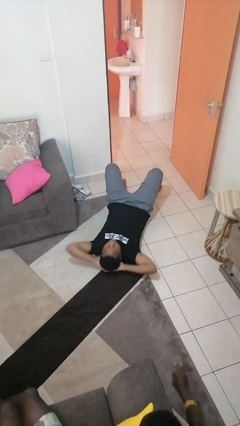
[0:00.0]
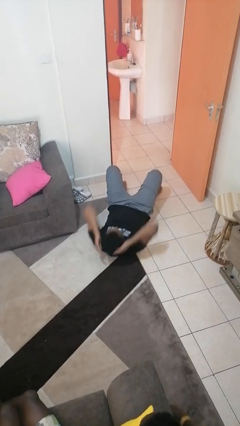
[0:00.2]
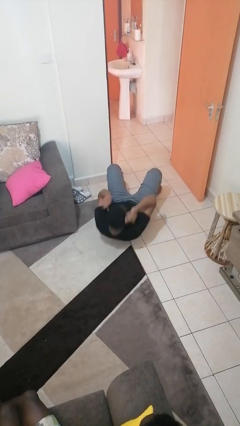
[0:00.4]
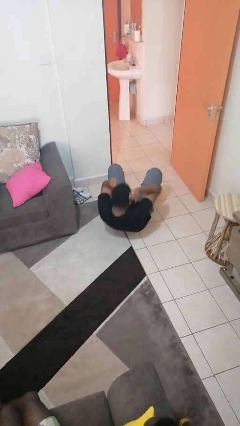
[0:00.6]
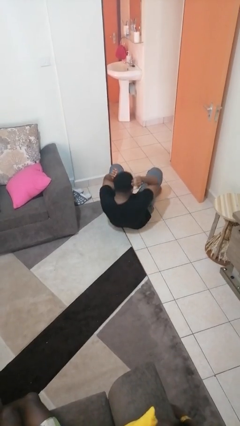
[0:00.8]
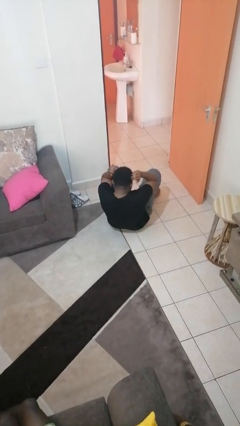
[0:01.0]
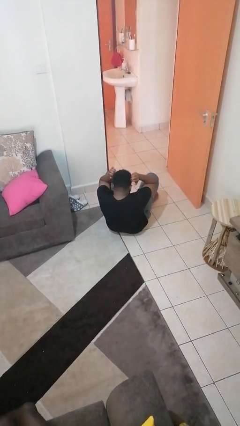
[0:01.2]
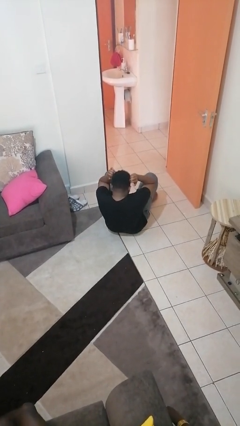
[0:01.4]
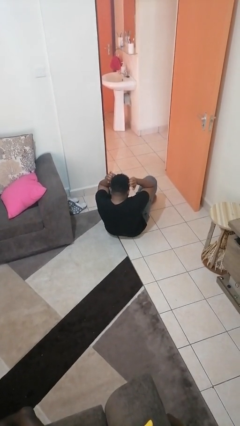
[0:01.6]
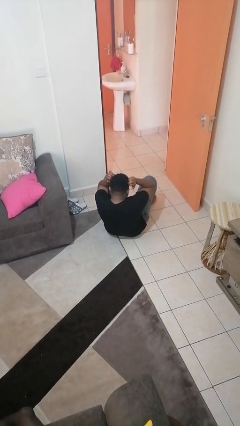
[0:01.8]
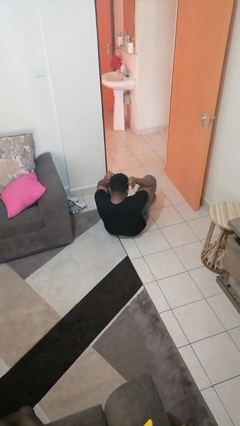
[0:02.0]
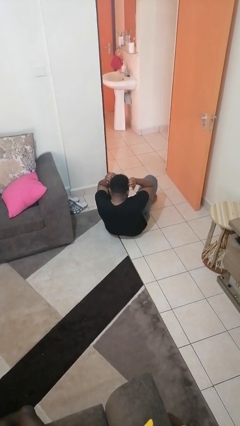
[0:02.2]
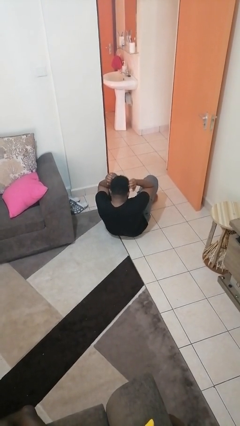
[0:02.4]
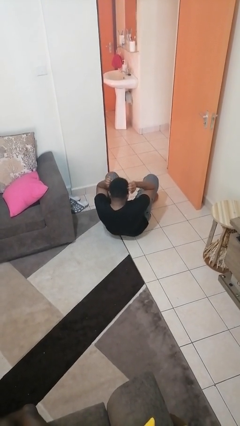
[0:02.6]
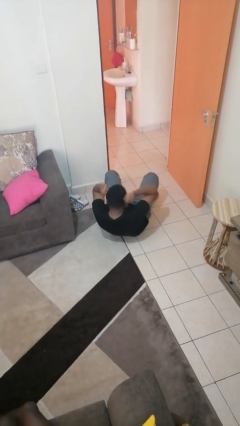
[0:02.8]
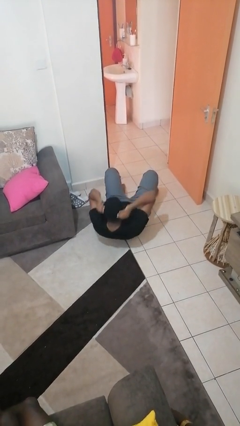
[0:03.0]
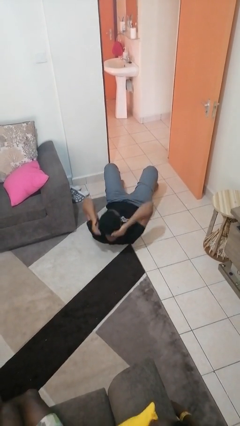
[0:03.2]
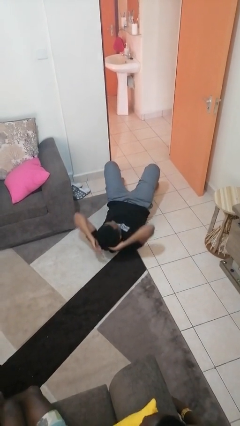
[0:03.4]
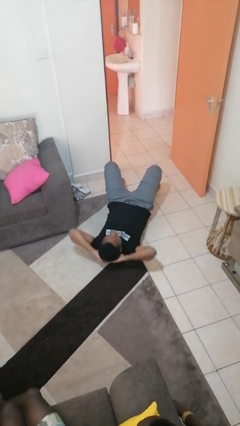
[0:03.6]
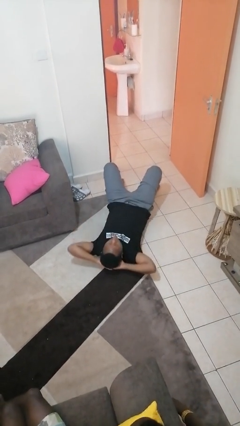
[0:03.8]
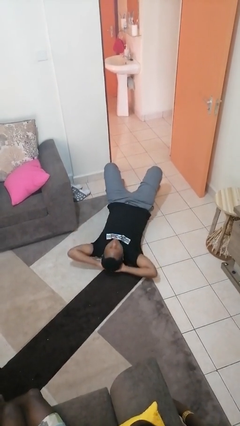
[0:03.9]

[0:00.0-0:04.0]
person exercises with situp

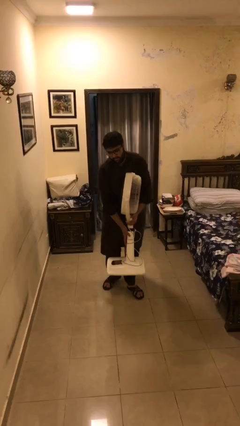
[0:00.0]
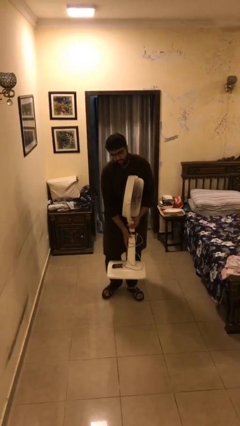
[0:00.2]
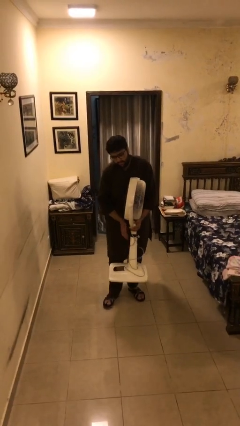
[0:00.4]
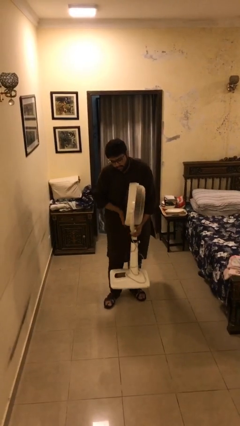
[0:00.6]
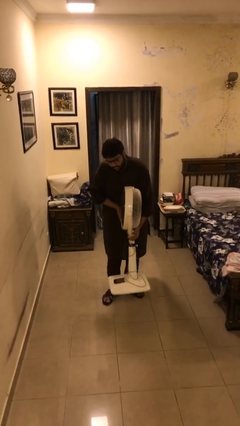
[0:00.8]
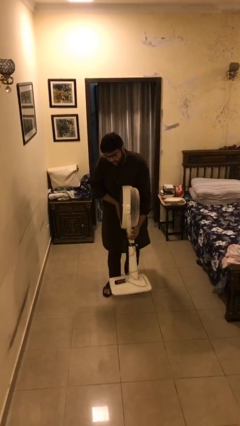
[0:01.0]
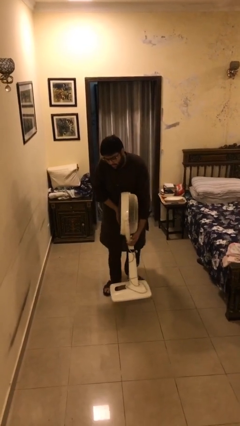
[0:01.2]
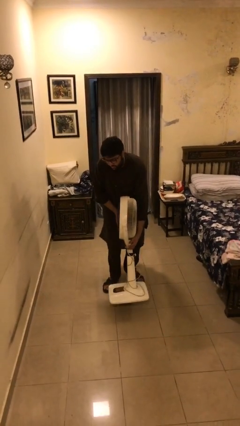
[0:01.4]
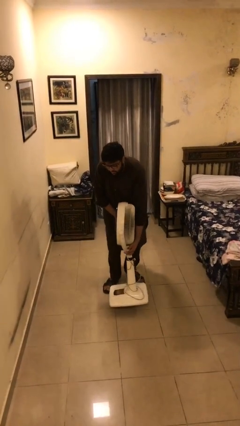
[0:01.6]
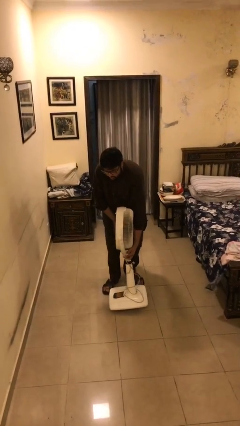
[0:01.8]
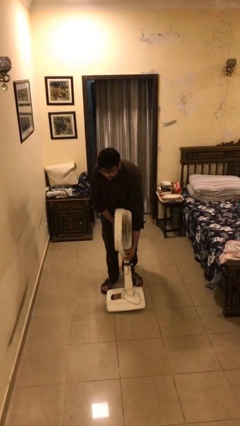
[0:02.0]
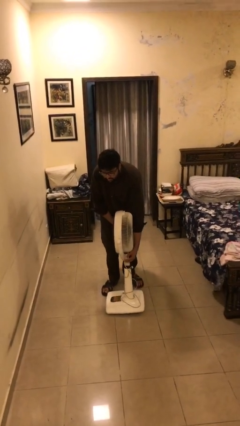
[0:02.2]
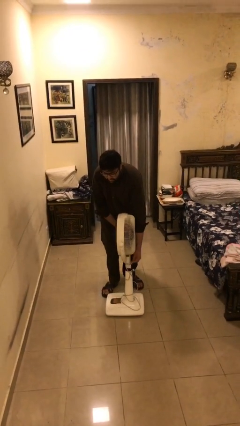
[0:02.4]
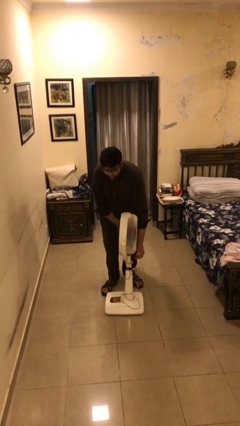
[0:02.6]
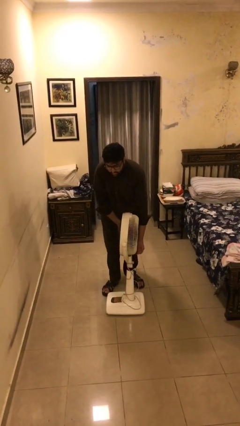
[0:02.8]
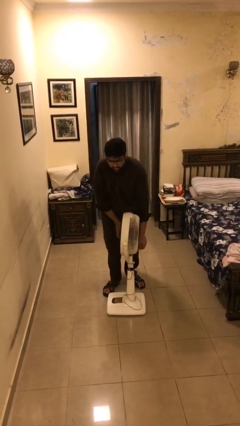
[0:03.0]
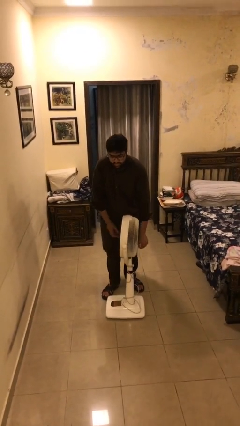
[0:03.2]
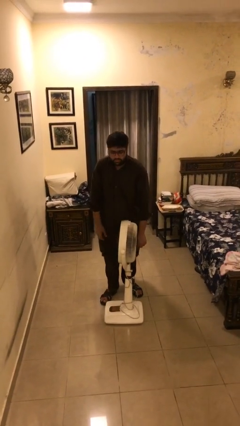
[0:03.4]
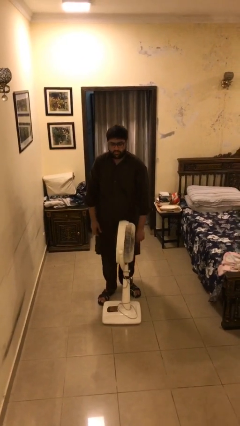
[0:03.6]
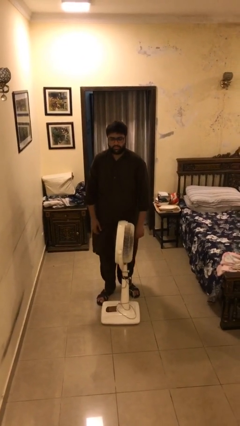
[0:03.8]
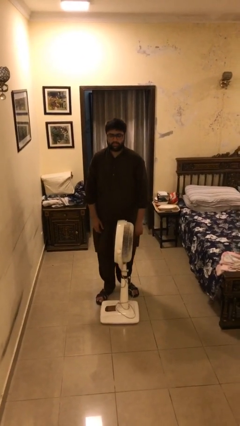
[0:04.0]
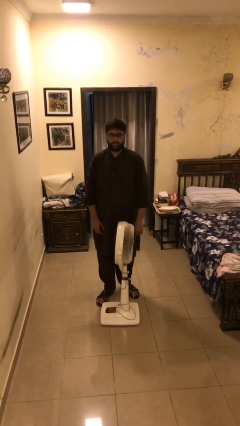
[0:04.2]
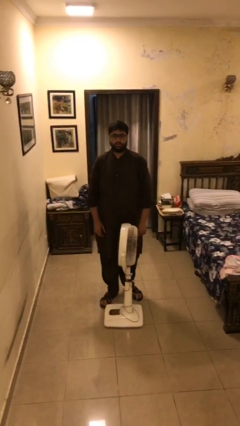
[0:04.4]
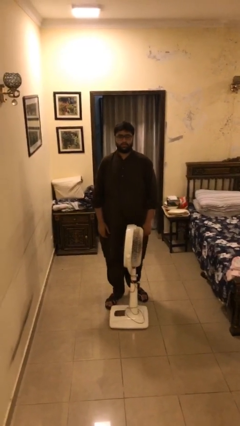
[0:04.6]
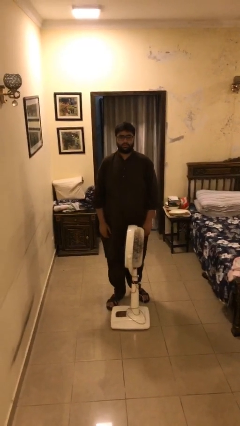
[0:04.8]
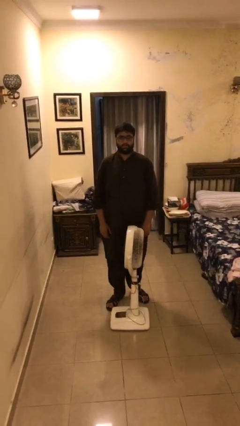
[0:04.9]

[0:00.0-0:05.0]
person puts down object on floor

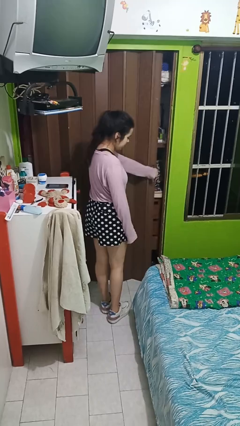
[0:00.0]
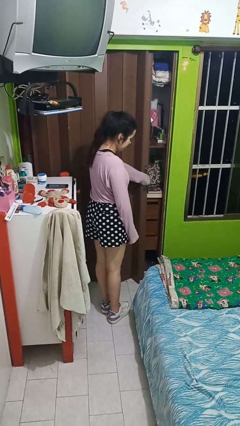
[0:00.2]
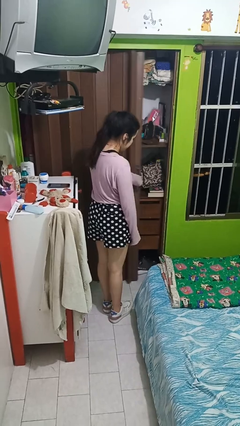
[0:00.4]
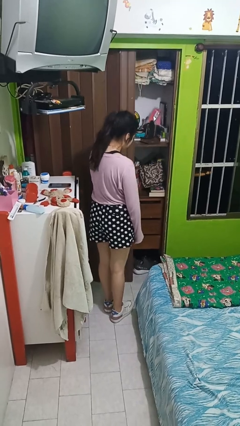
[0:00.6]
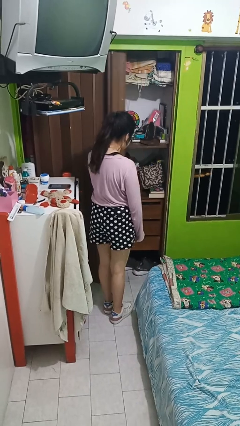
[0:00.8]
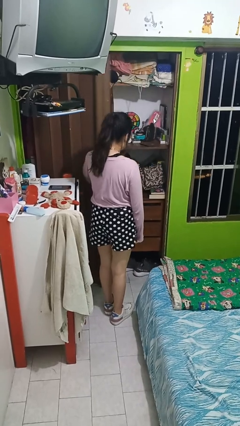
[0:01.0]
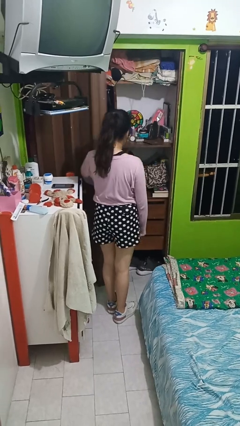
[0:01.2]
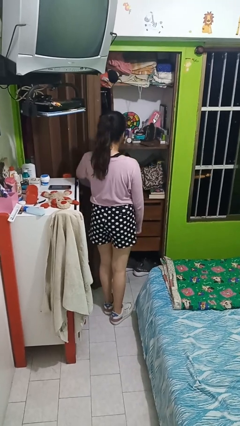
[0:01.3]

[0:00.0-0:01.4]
person opens sliding door

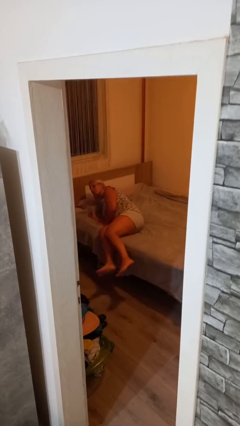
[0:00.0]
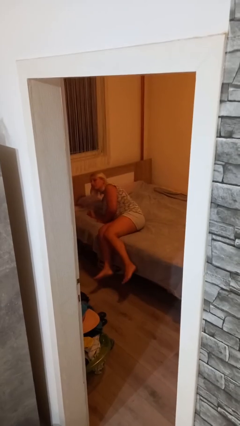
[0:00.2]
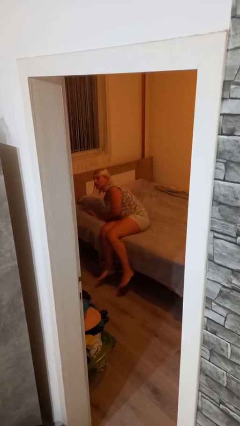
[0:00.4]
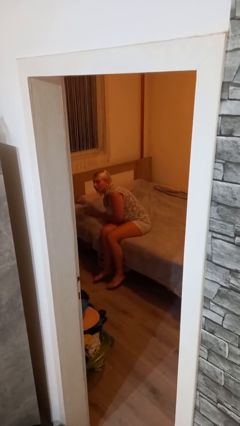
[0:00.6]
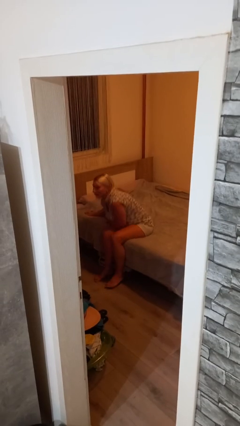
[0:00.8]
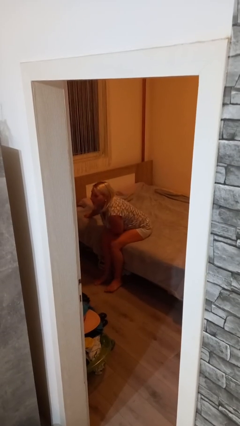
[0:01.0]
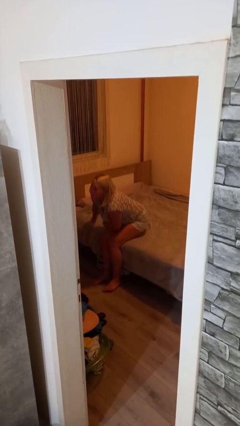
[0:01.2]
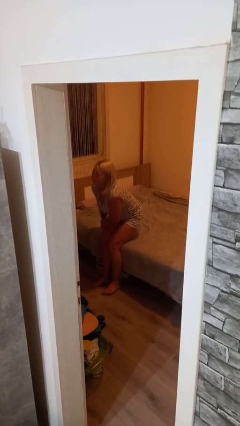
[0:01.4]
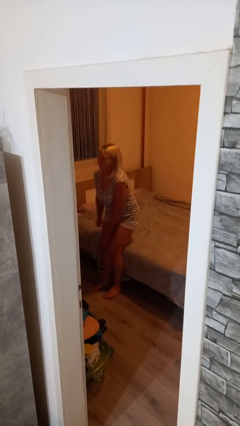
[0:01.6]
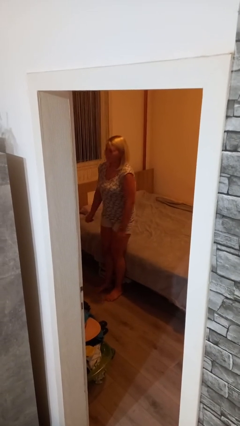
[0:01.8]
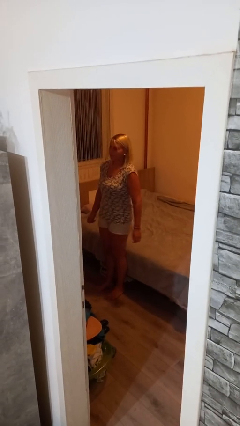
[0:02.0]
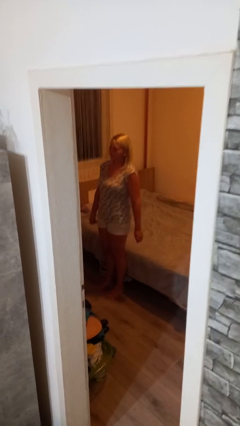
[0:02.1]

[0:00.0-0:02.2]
person stands up

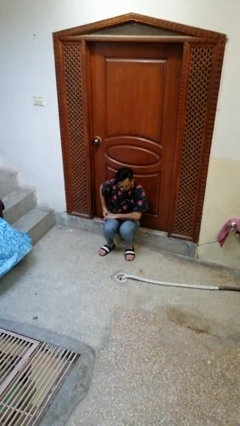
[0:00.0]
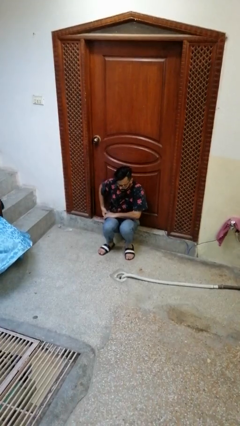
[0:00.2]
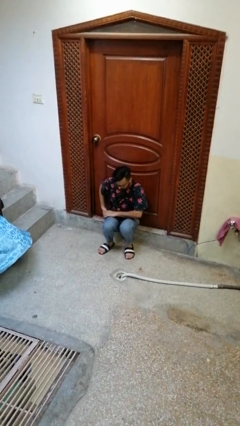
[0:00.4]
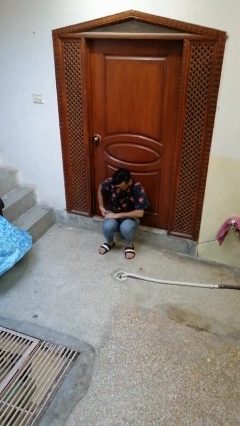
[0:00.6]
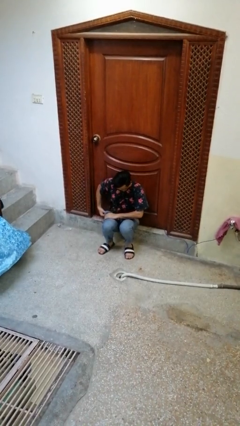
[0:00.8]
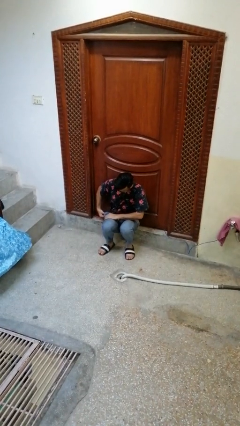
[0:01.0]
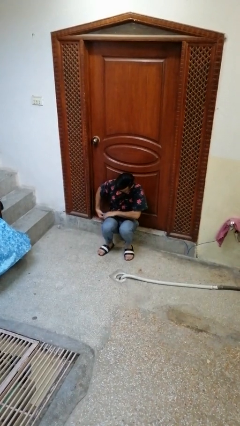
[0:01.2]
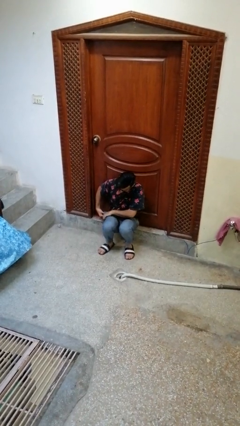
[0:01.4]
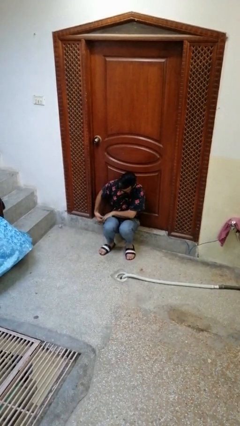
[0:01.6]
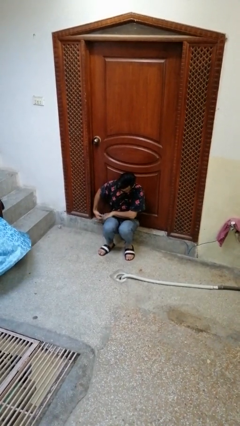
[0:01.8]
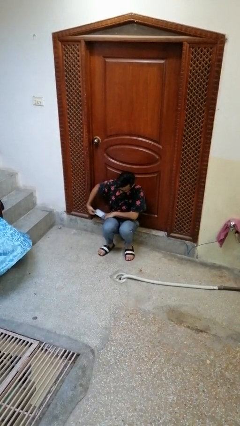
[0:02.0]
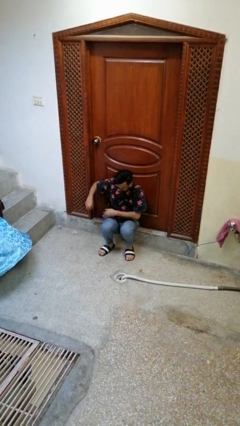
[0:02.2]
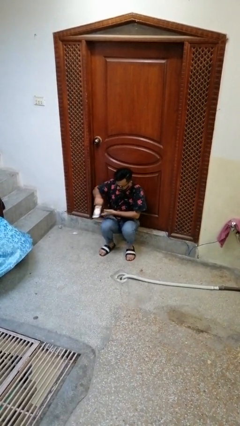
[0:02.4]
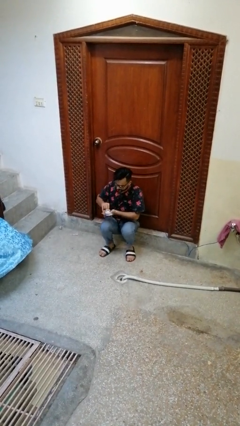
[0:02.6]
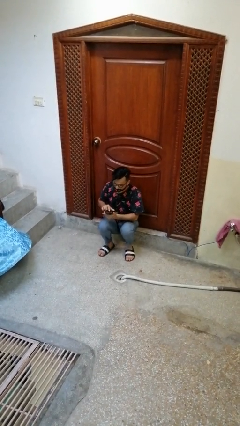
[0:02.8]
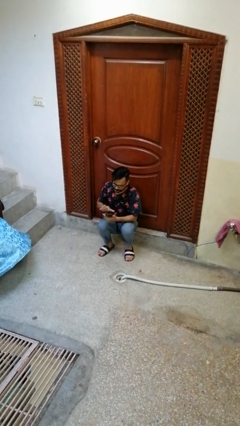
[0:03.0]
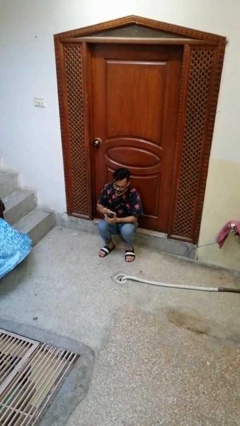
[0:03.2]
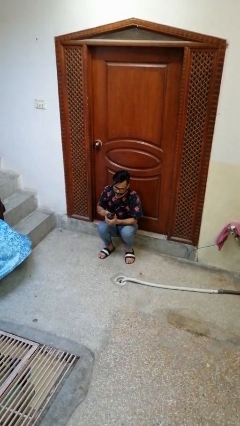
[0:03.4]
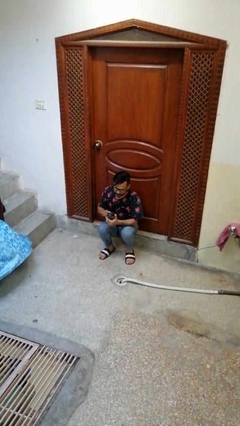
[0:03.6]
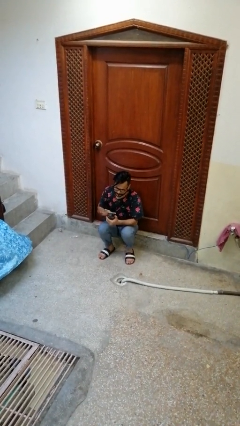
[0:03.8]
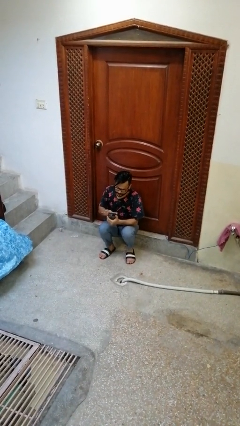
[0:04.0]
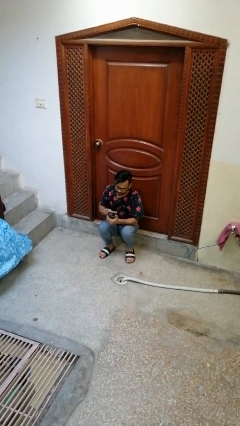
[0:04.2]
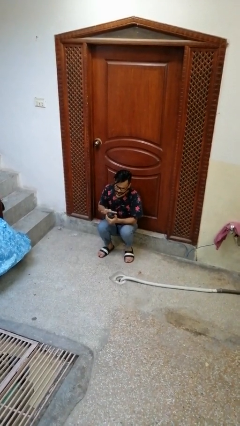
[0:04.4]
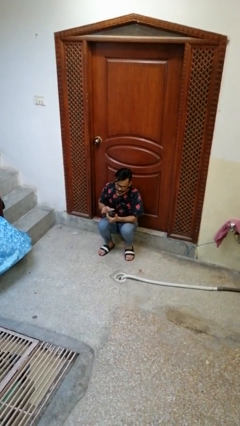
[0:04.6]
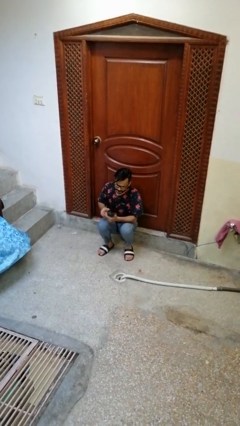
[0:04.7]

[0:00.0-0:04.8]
person takes phone from pocket

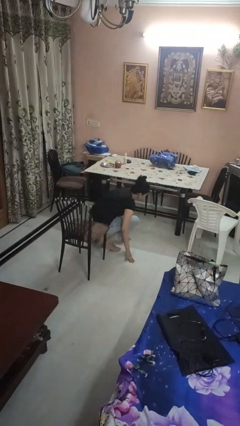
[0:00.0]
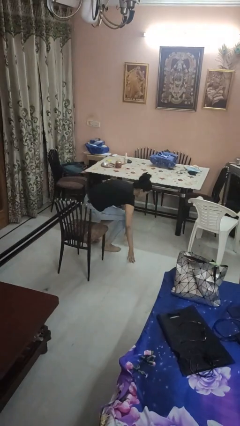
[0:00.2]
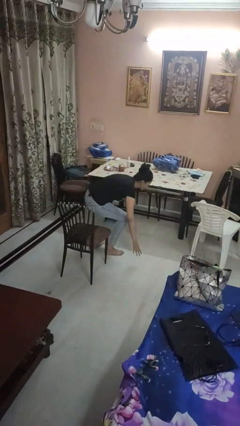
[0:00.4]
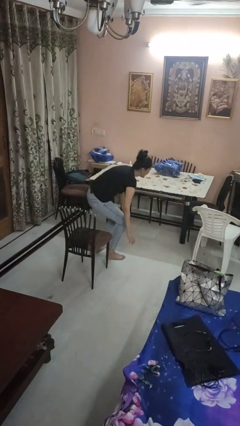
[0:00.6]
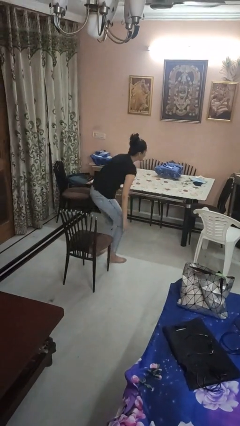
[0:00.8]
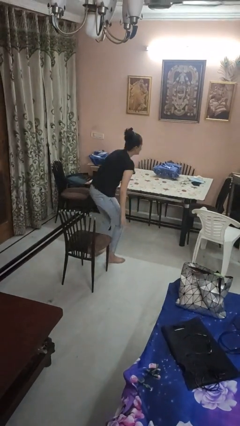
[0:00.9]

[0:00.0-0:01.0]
person stands up from floor
